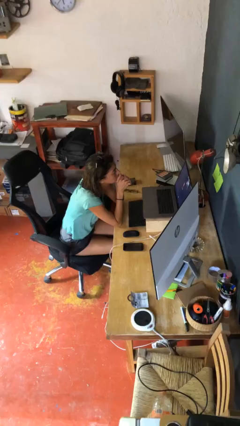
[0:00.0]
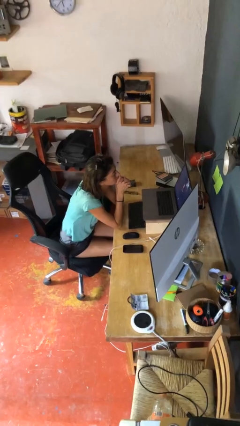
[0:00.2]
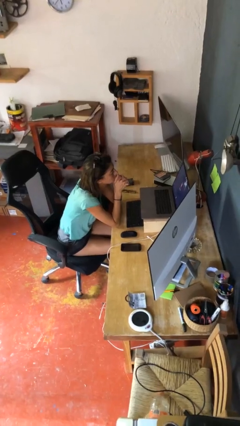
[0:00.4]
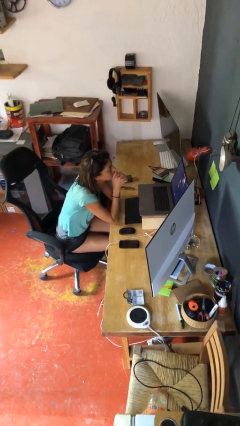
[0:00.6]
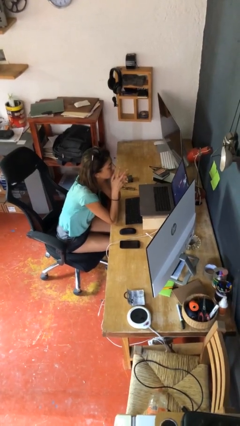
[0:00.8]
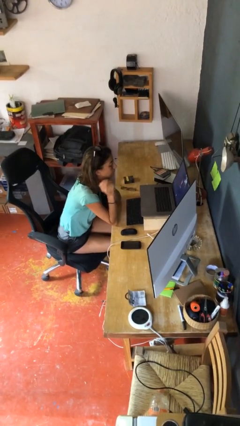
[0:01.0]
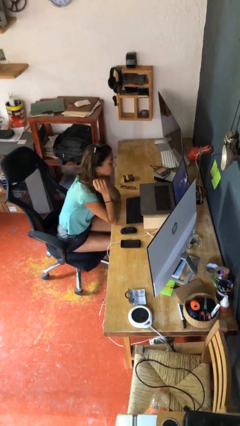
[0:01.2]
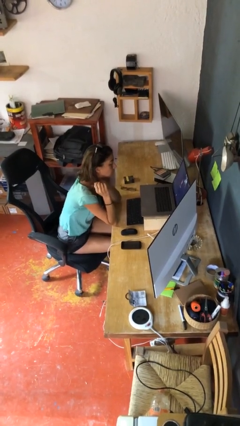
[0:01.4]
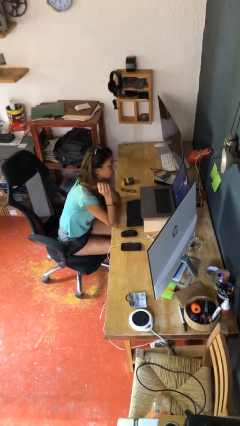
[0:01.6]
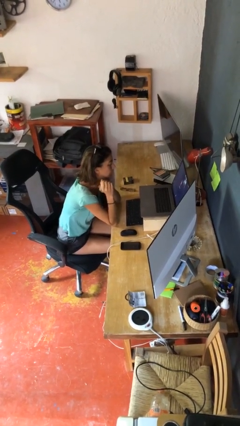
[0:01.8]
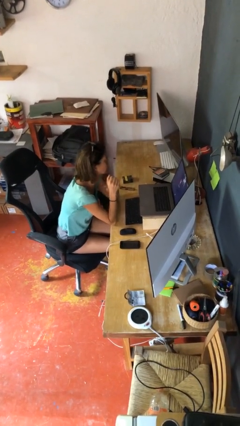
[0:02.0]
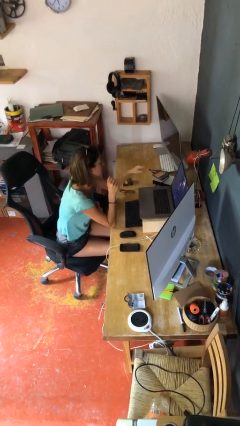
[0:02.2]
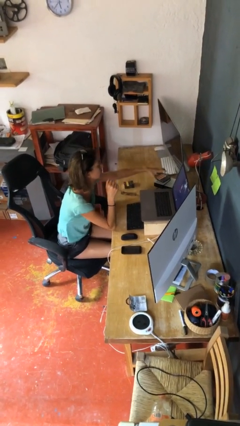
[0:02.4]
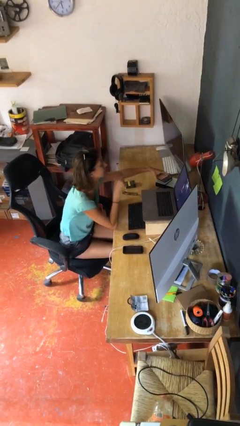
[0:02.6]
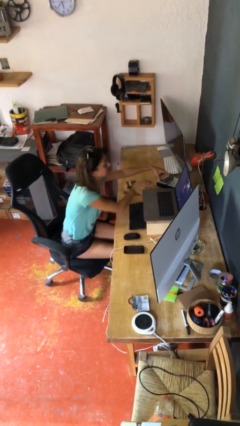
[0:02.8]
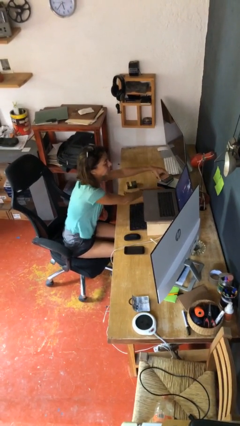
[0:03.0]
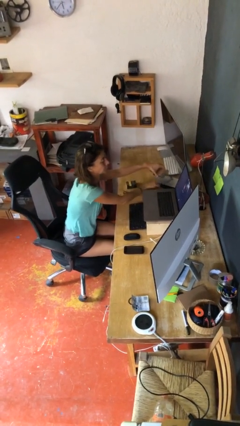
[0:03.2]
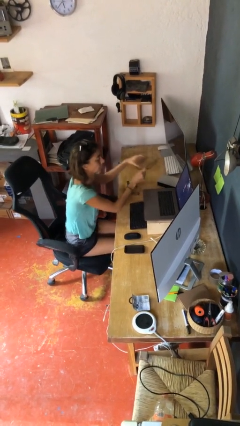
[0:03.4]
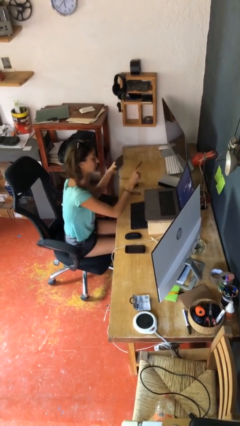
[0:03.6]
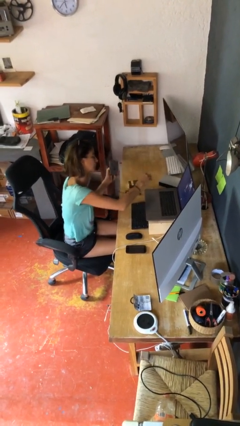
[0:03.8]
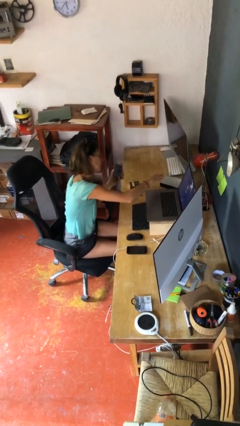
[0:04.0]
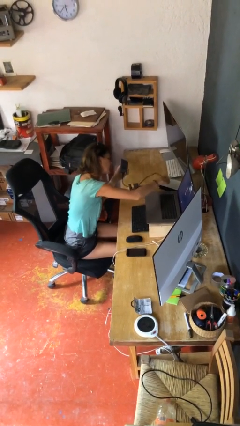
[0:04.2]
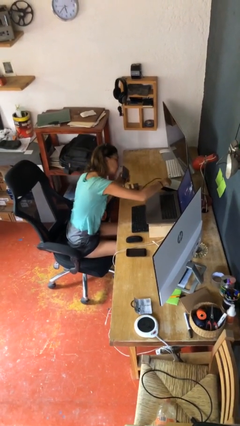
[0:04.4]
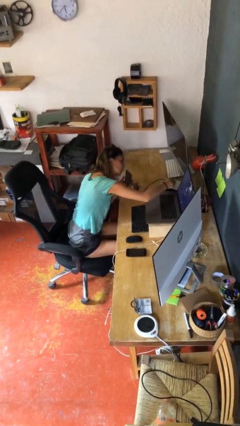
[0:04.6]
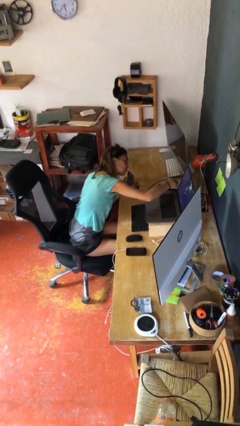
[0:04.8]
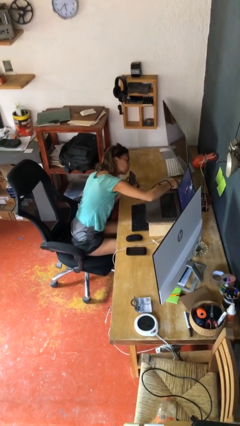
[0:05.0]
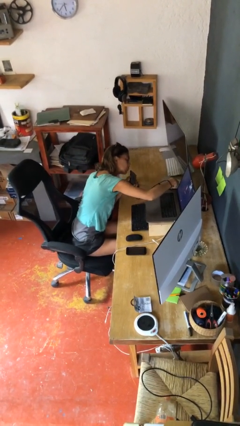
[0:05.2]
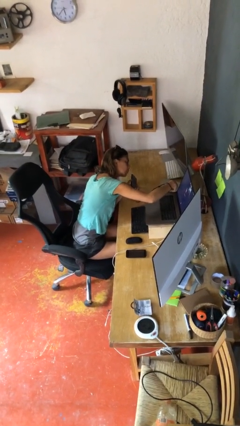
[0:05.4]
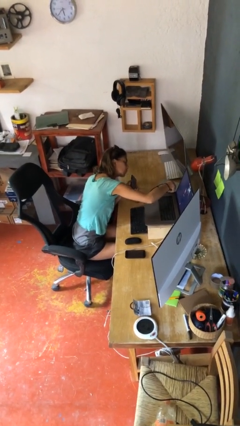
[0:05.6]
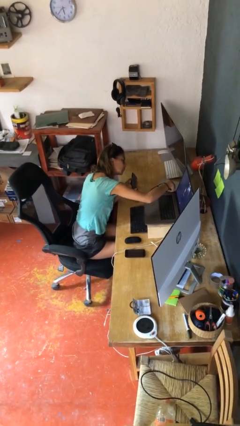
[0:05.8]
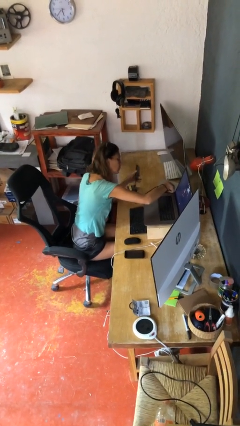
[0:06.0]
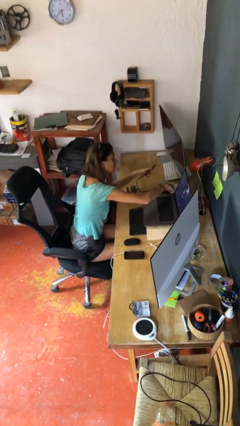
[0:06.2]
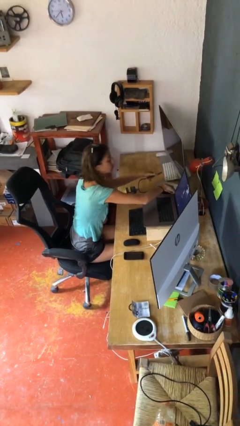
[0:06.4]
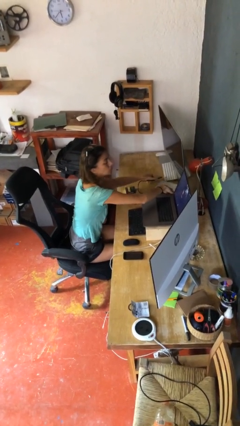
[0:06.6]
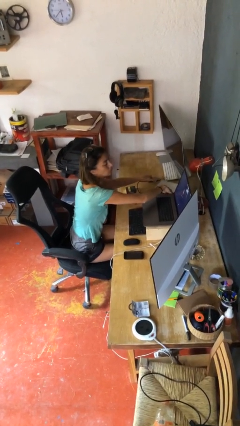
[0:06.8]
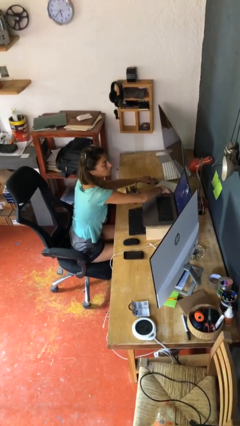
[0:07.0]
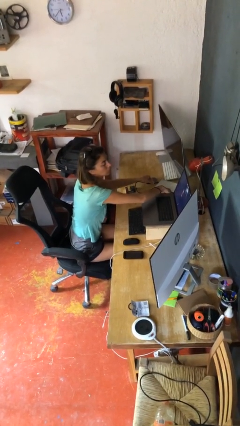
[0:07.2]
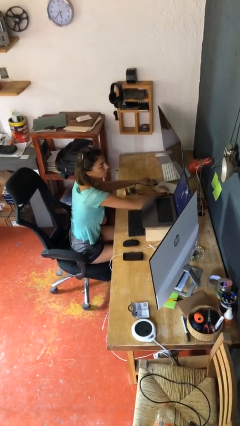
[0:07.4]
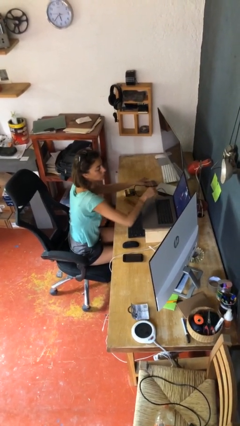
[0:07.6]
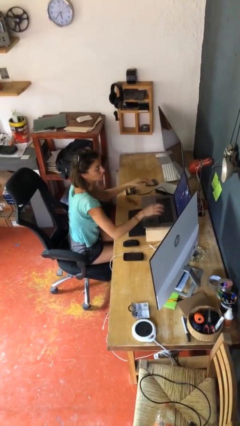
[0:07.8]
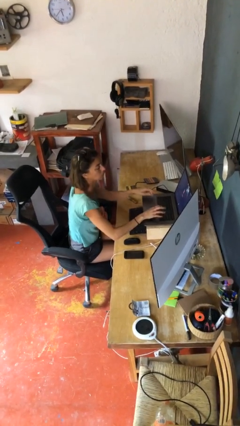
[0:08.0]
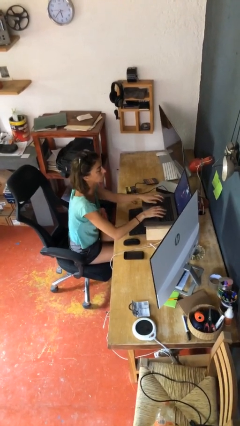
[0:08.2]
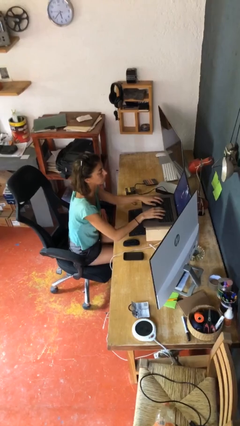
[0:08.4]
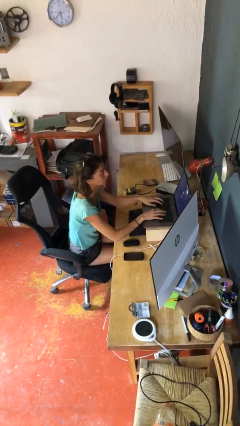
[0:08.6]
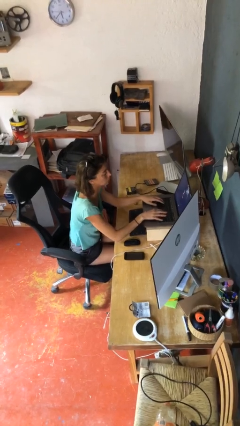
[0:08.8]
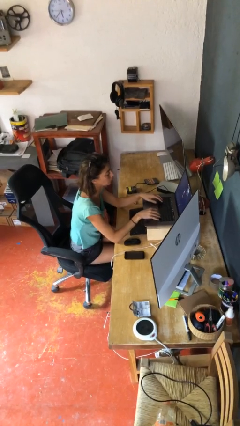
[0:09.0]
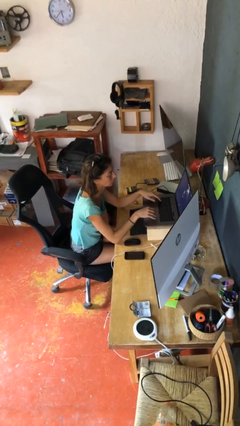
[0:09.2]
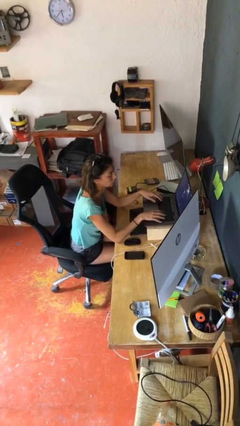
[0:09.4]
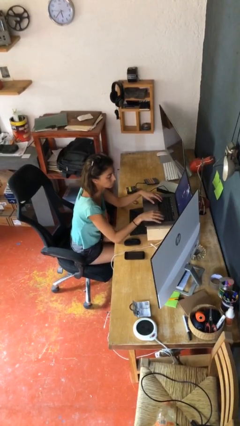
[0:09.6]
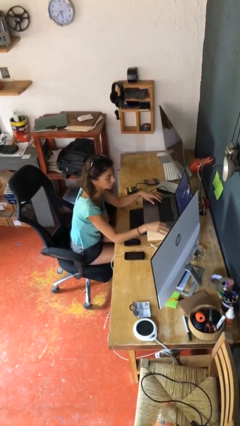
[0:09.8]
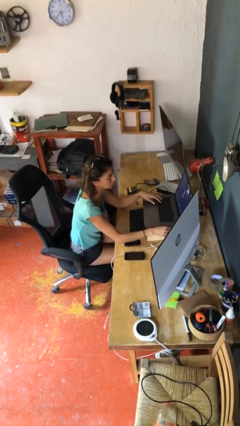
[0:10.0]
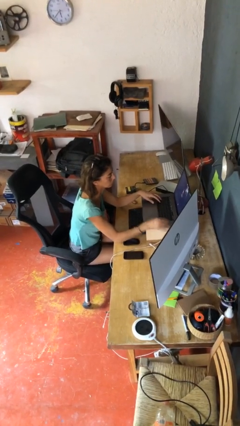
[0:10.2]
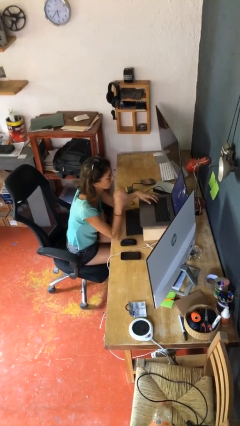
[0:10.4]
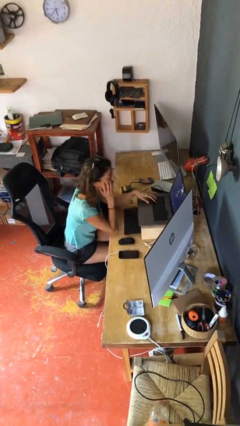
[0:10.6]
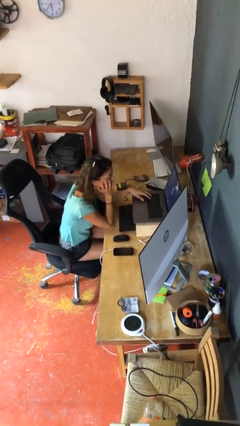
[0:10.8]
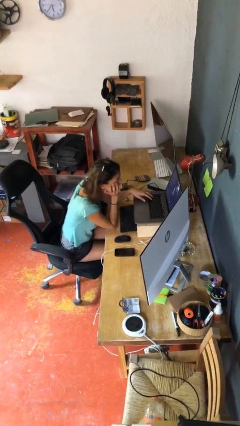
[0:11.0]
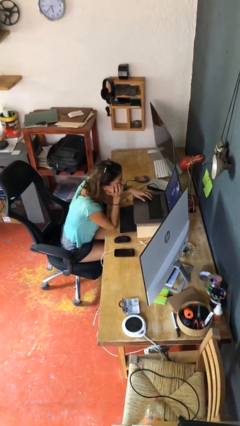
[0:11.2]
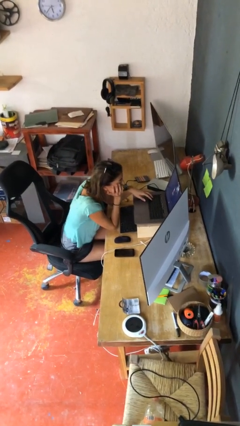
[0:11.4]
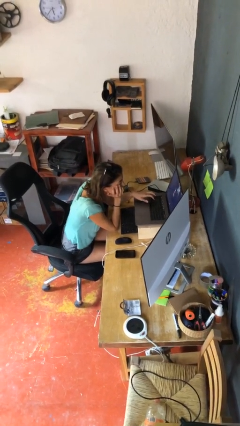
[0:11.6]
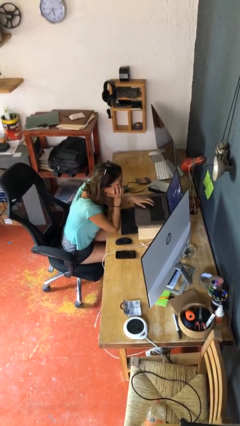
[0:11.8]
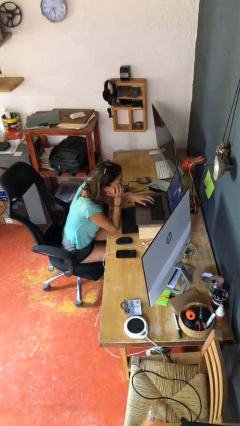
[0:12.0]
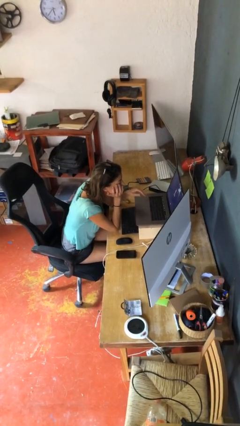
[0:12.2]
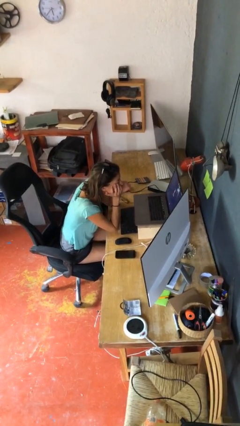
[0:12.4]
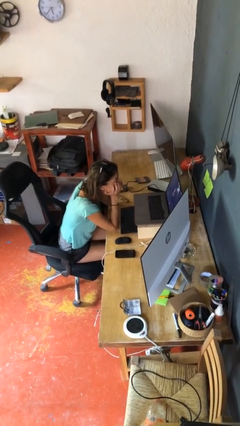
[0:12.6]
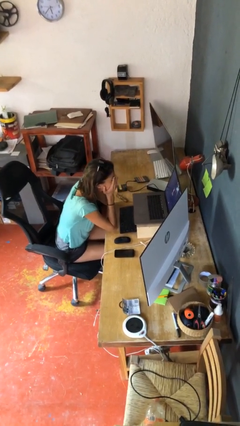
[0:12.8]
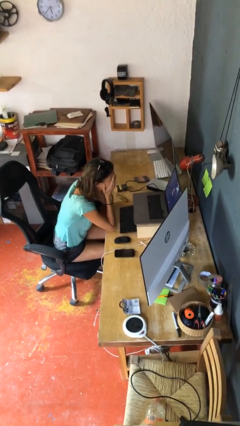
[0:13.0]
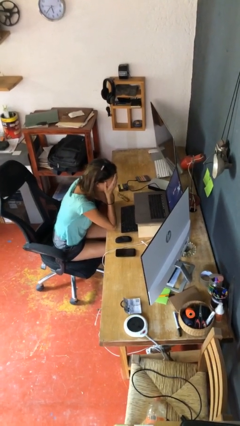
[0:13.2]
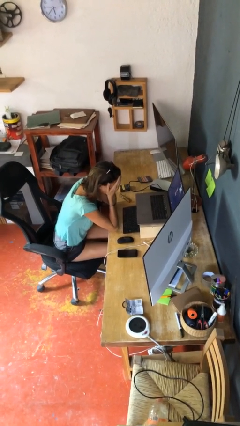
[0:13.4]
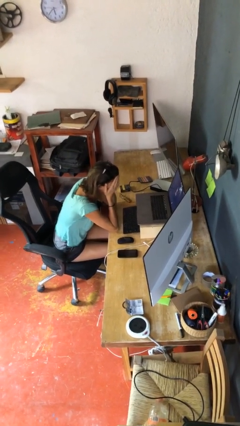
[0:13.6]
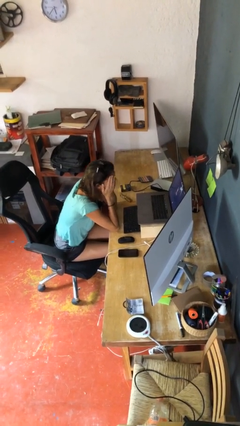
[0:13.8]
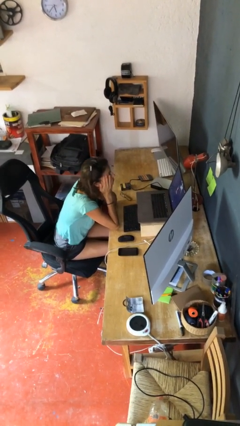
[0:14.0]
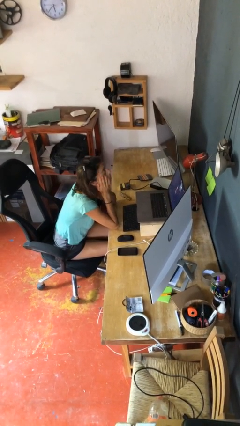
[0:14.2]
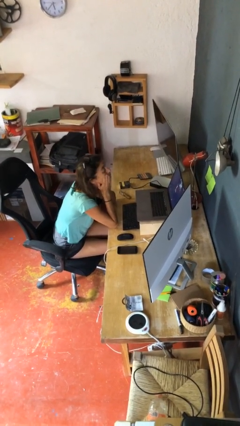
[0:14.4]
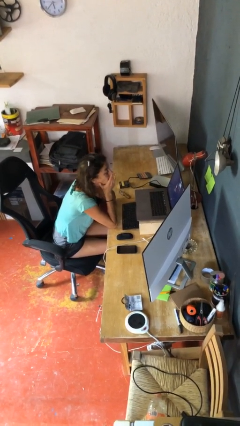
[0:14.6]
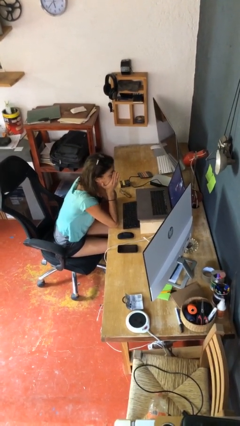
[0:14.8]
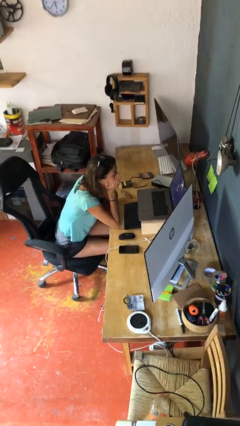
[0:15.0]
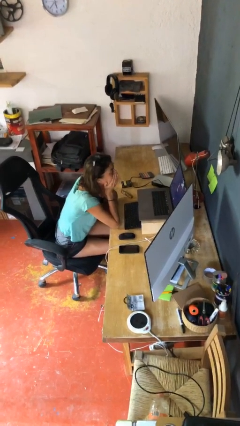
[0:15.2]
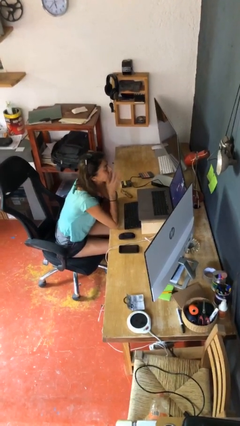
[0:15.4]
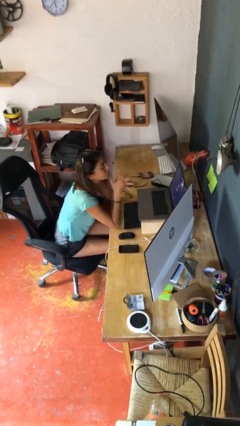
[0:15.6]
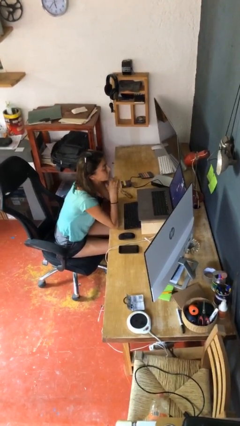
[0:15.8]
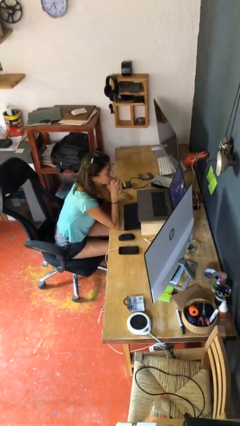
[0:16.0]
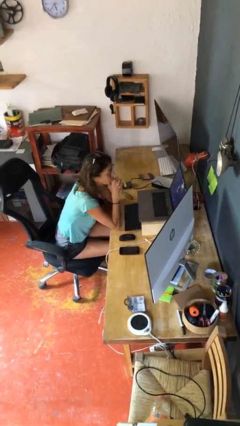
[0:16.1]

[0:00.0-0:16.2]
person interacts with laptop

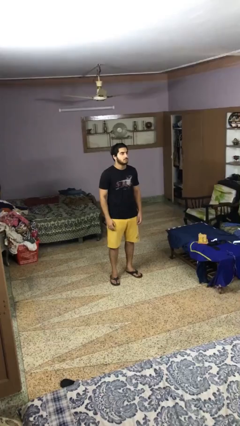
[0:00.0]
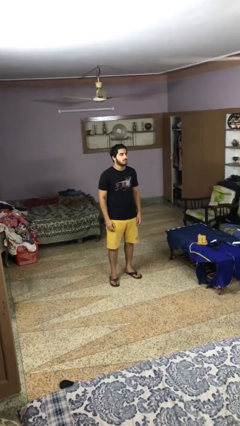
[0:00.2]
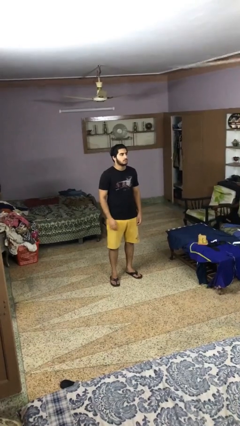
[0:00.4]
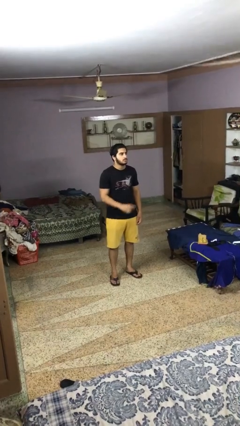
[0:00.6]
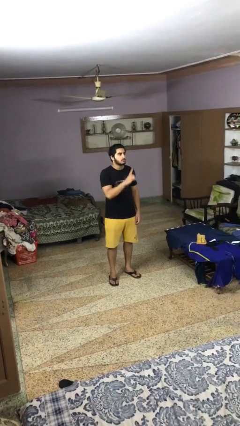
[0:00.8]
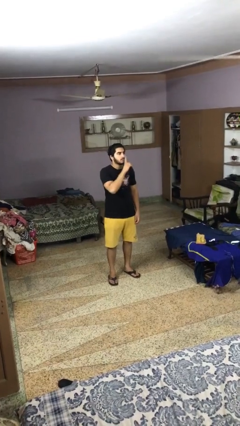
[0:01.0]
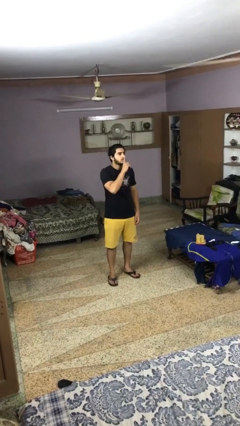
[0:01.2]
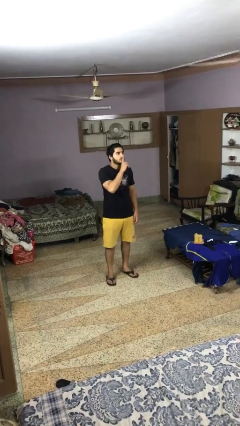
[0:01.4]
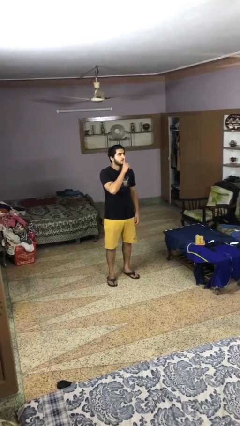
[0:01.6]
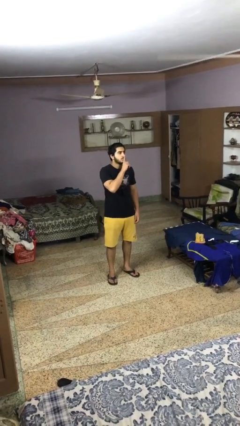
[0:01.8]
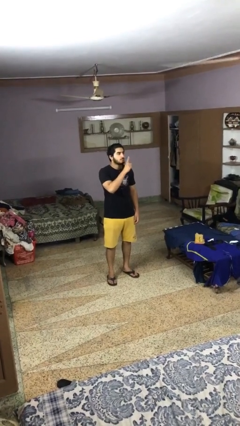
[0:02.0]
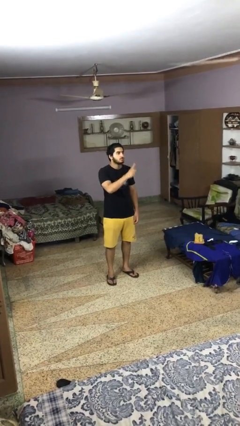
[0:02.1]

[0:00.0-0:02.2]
person gestures be quiet
